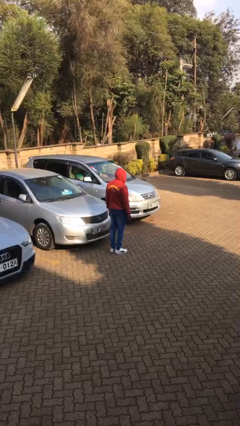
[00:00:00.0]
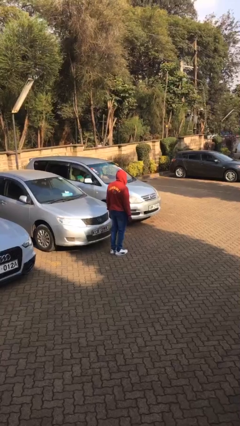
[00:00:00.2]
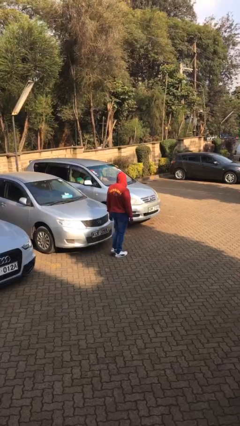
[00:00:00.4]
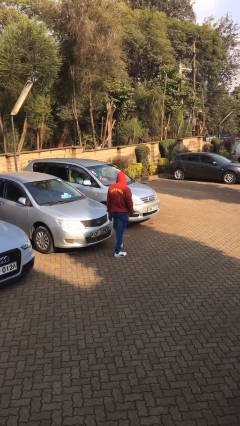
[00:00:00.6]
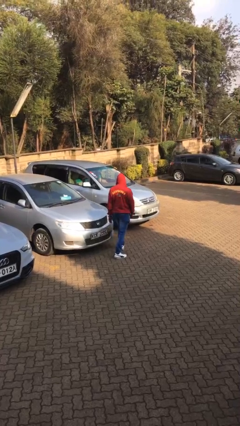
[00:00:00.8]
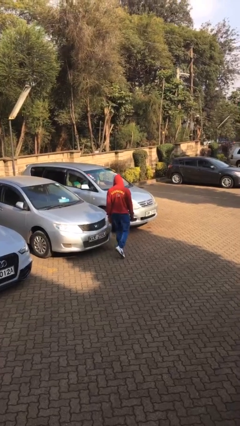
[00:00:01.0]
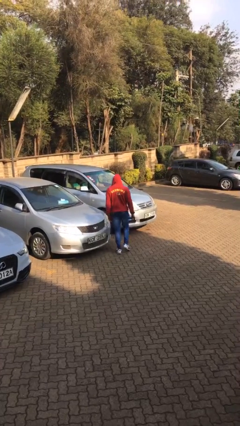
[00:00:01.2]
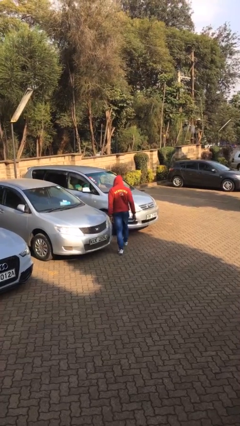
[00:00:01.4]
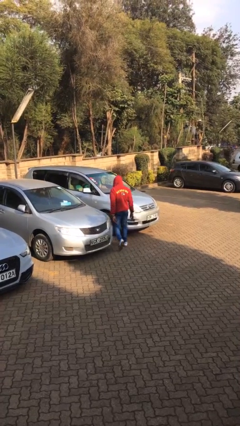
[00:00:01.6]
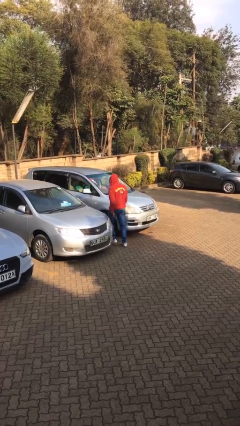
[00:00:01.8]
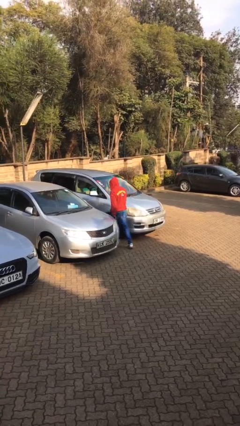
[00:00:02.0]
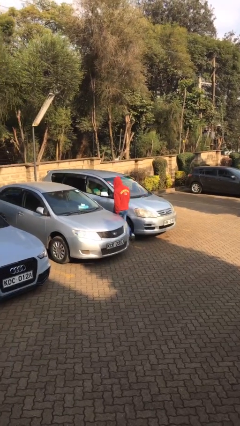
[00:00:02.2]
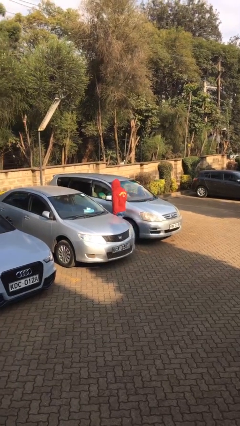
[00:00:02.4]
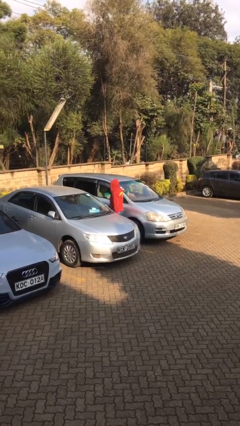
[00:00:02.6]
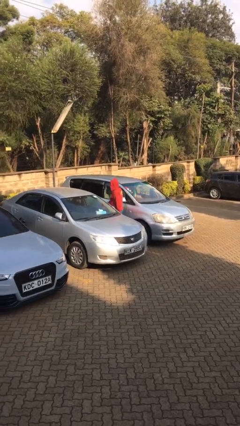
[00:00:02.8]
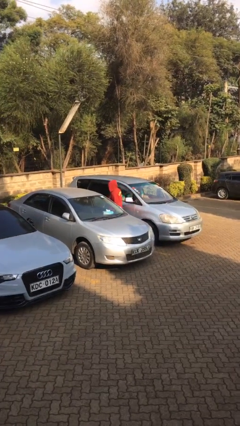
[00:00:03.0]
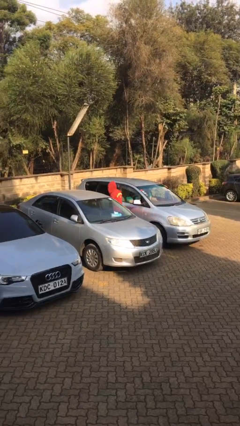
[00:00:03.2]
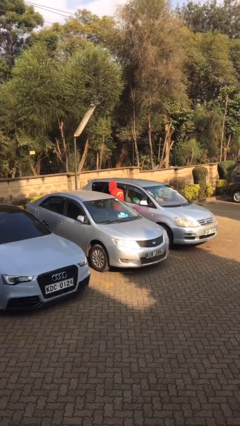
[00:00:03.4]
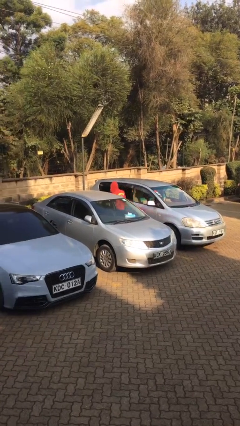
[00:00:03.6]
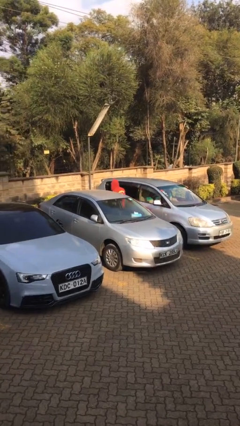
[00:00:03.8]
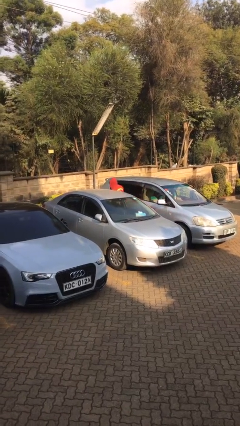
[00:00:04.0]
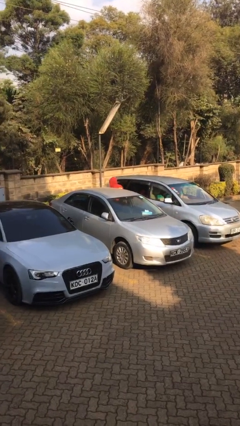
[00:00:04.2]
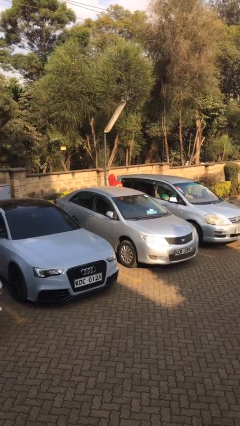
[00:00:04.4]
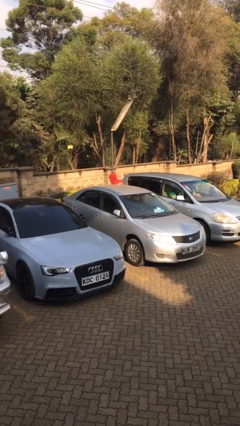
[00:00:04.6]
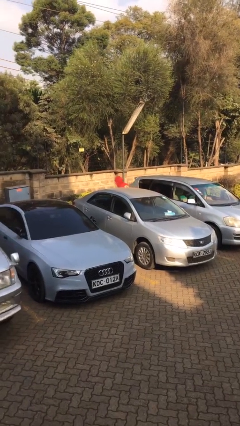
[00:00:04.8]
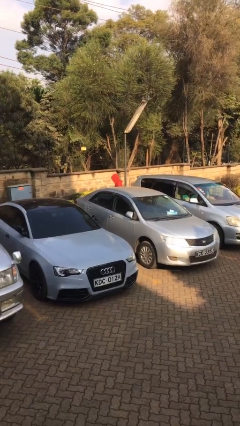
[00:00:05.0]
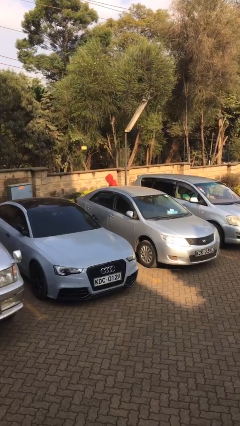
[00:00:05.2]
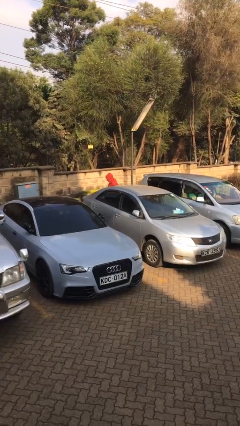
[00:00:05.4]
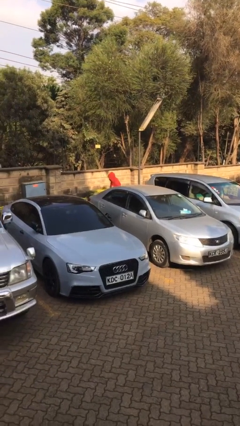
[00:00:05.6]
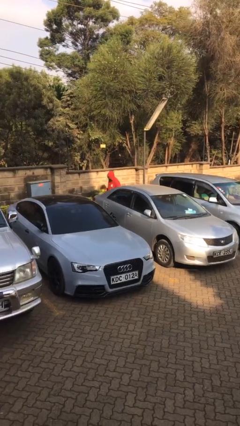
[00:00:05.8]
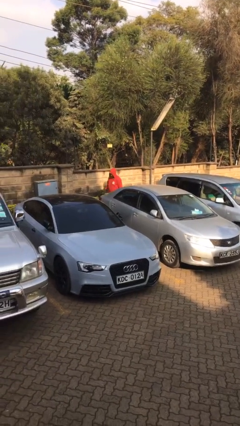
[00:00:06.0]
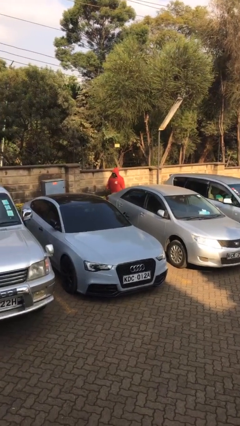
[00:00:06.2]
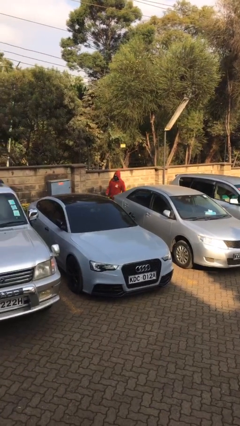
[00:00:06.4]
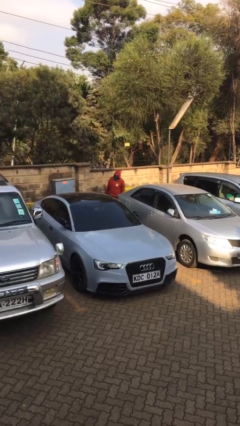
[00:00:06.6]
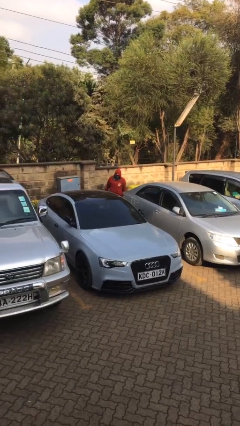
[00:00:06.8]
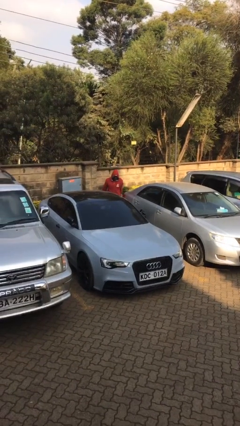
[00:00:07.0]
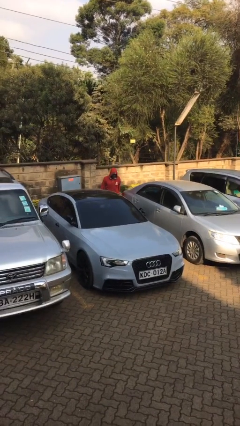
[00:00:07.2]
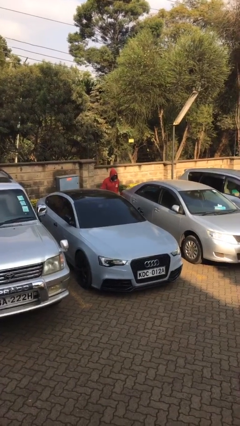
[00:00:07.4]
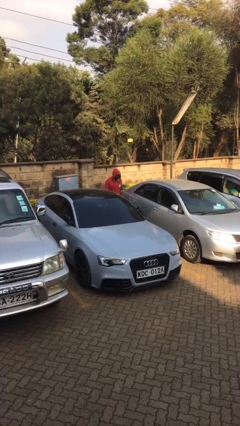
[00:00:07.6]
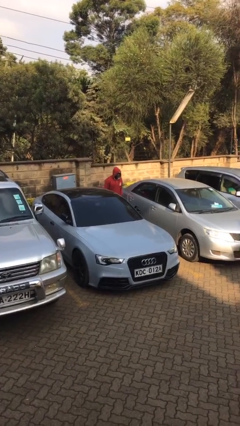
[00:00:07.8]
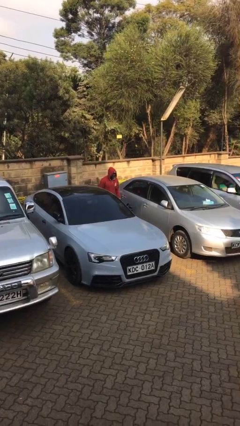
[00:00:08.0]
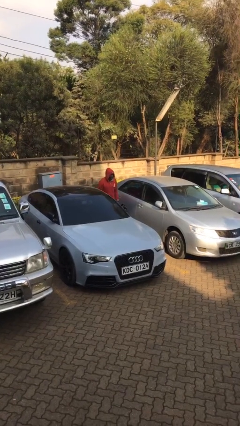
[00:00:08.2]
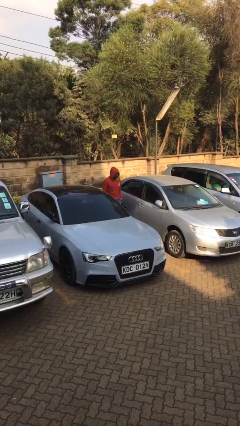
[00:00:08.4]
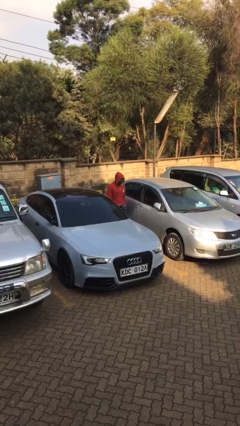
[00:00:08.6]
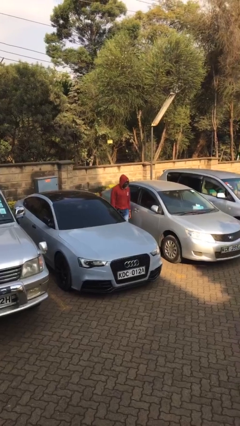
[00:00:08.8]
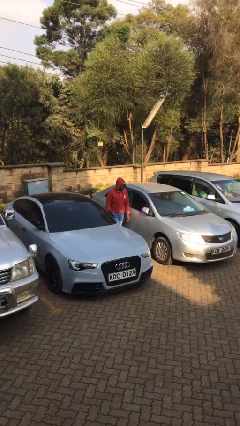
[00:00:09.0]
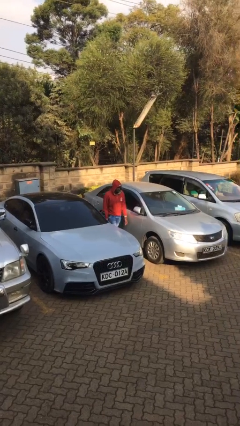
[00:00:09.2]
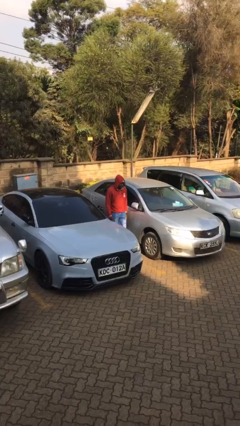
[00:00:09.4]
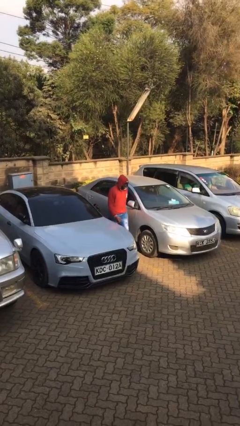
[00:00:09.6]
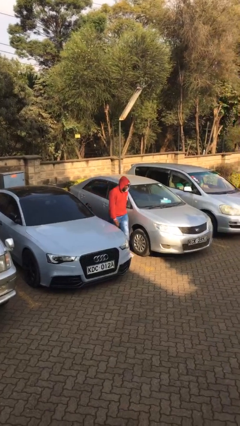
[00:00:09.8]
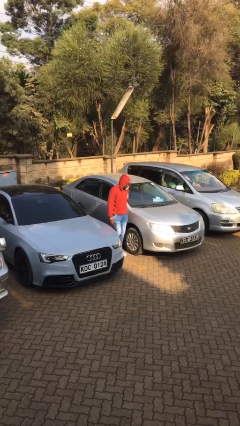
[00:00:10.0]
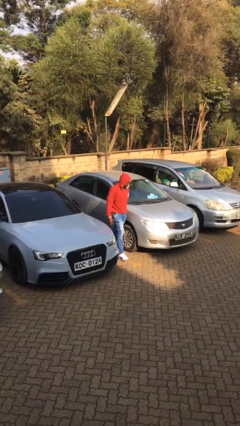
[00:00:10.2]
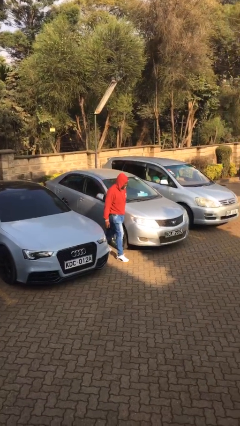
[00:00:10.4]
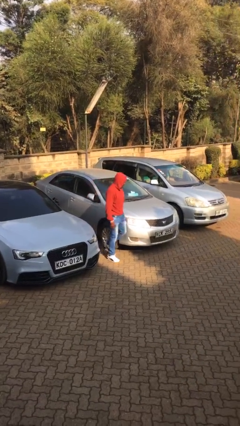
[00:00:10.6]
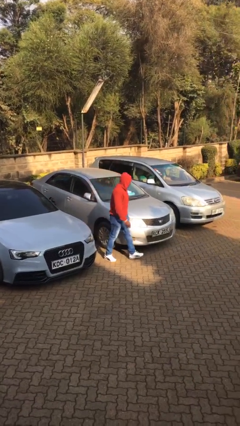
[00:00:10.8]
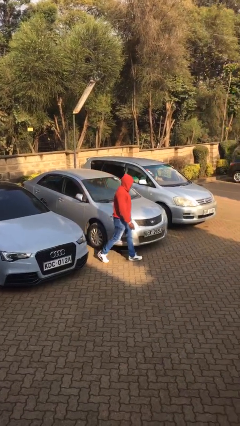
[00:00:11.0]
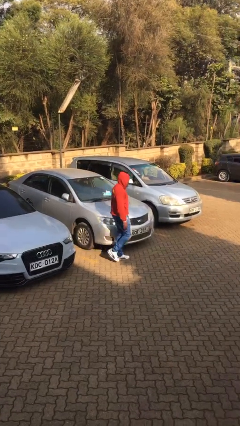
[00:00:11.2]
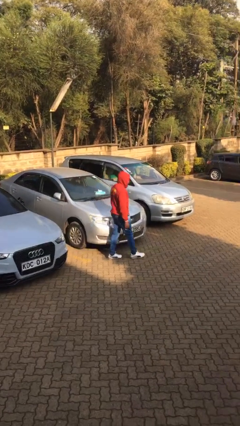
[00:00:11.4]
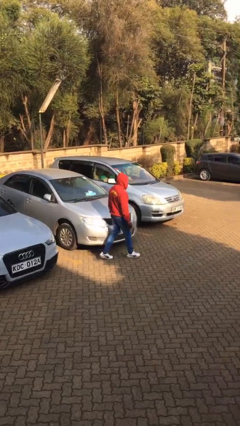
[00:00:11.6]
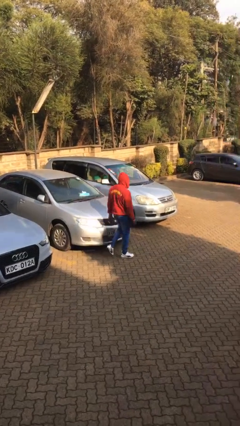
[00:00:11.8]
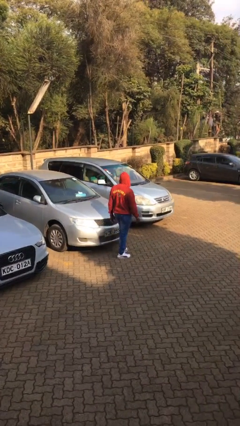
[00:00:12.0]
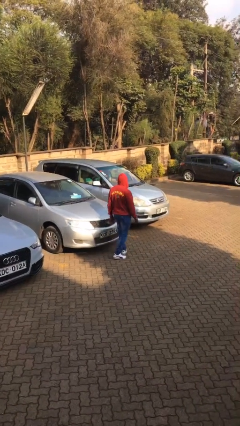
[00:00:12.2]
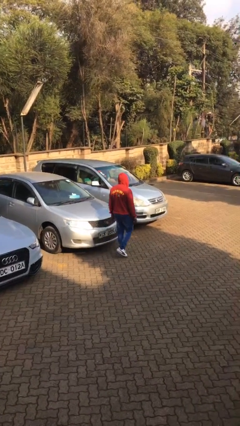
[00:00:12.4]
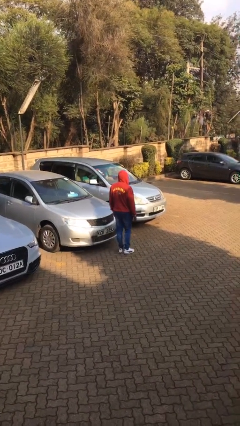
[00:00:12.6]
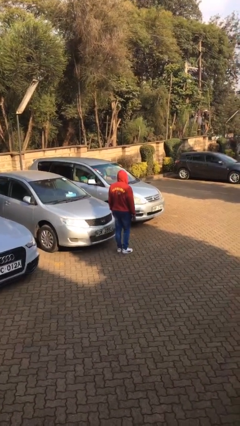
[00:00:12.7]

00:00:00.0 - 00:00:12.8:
person walks around car

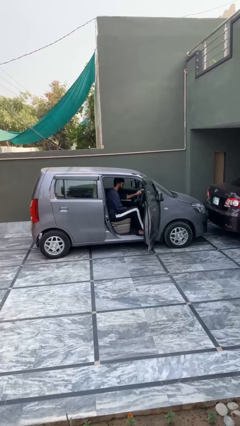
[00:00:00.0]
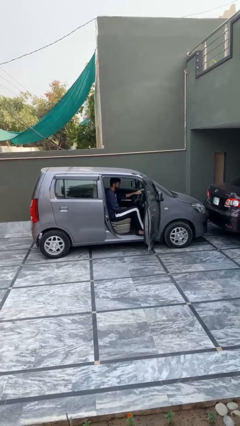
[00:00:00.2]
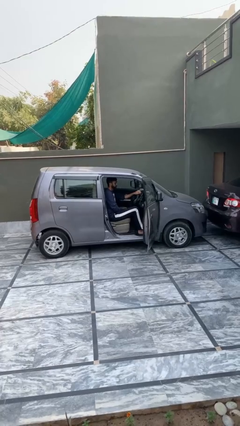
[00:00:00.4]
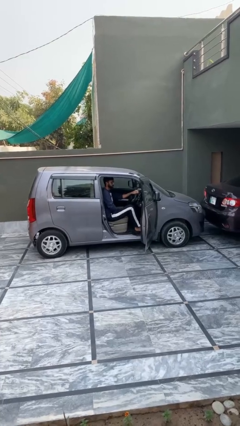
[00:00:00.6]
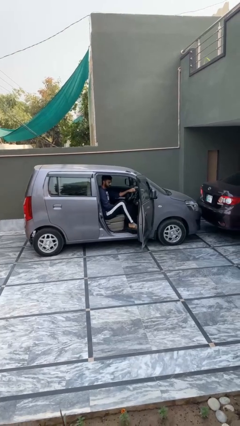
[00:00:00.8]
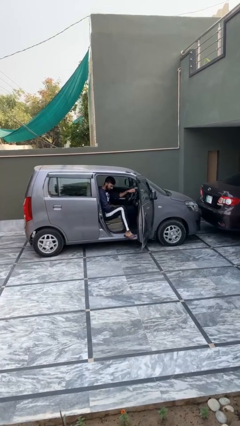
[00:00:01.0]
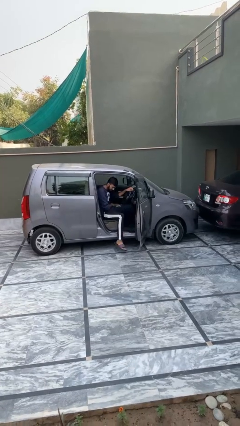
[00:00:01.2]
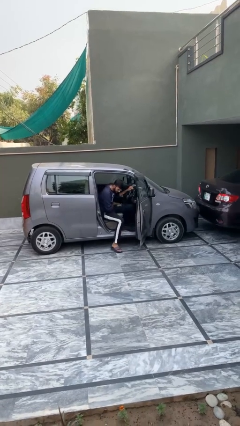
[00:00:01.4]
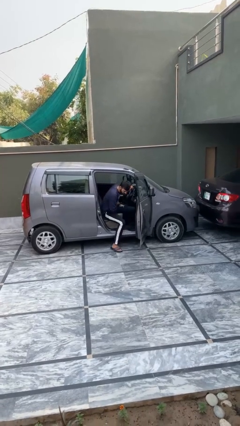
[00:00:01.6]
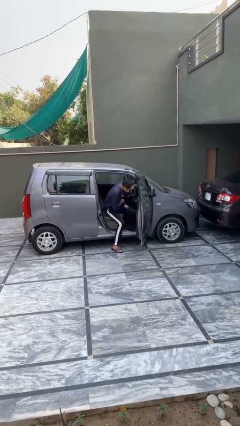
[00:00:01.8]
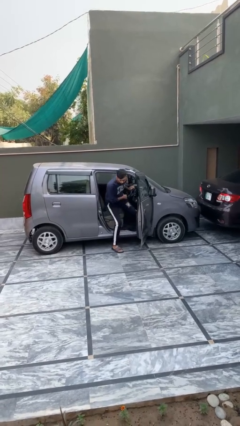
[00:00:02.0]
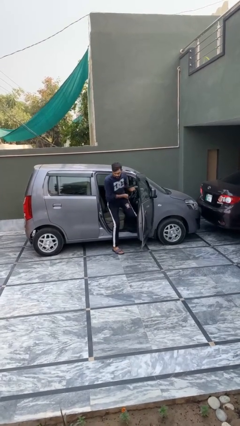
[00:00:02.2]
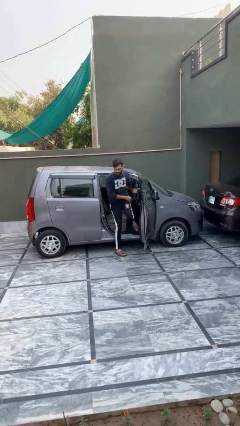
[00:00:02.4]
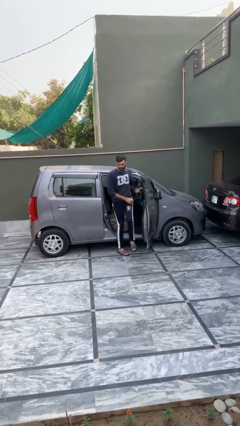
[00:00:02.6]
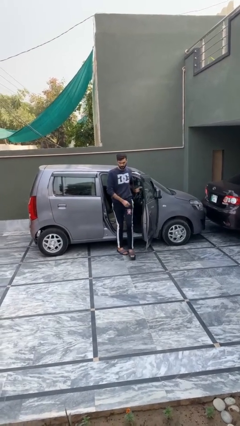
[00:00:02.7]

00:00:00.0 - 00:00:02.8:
person exits car

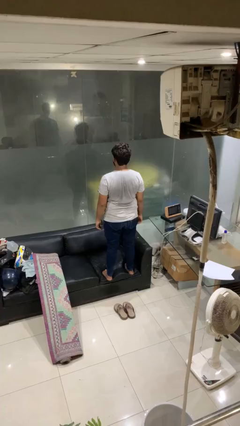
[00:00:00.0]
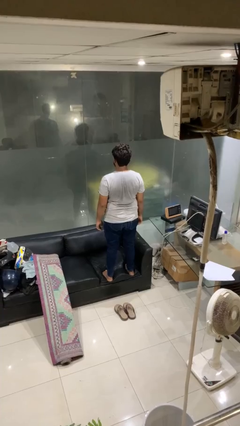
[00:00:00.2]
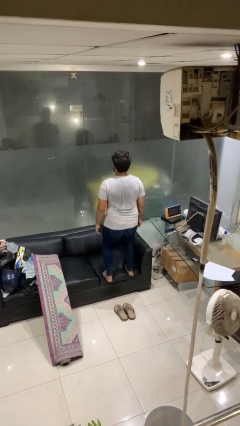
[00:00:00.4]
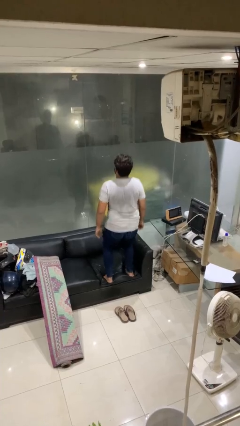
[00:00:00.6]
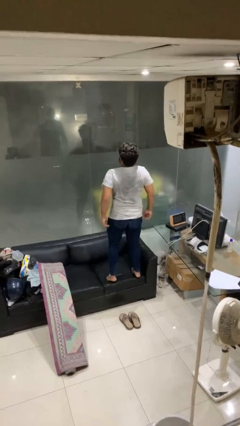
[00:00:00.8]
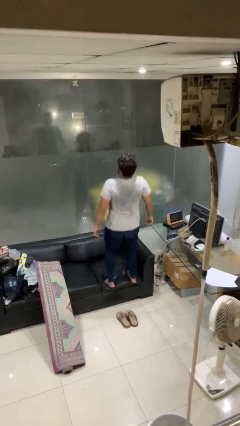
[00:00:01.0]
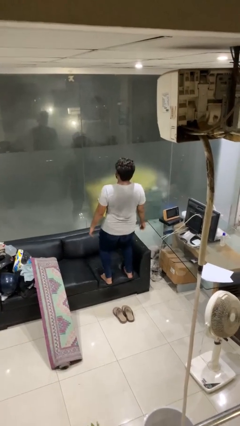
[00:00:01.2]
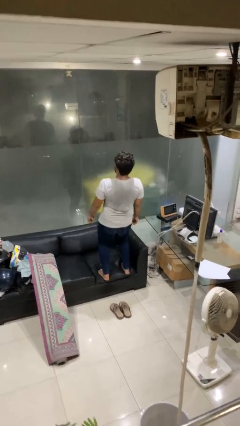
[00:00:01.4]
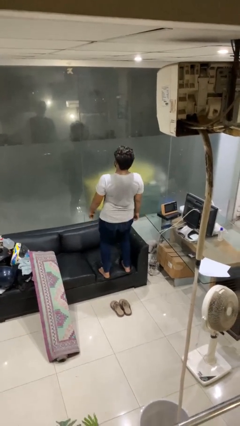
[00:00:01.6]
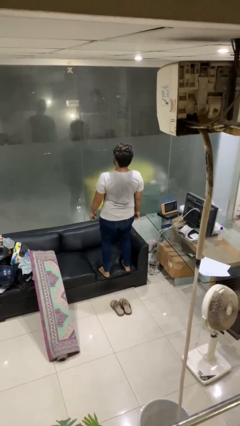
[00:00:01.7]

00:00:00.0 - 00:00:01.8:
person jumps on couch

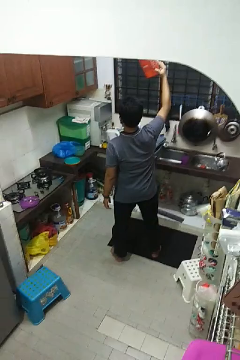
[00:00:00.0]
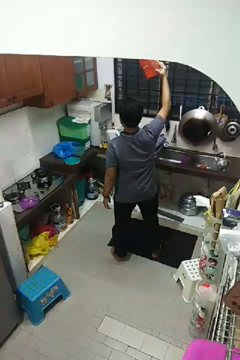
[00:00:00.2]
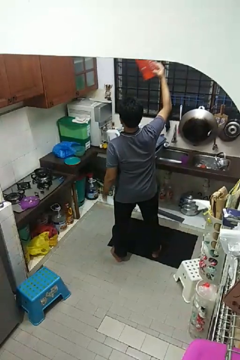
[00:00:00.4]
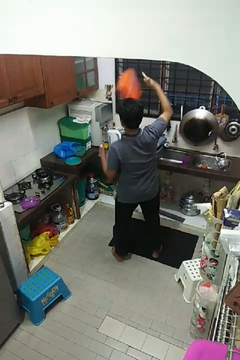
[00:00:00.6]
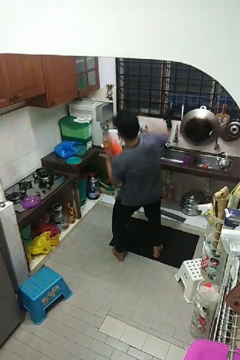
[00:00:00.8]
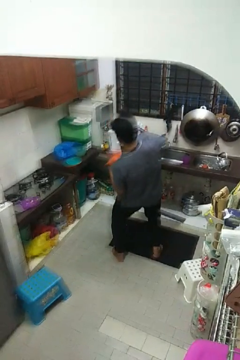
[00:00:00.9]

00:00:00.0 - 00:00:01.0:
person picks up object from floor
